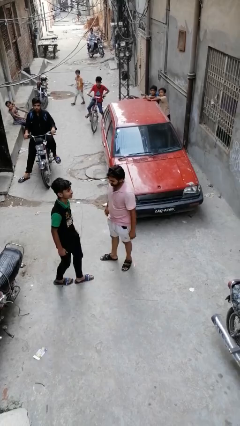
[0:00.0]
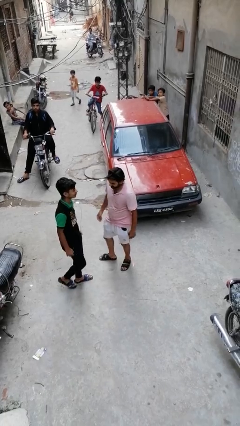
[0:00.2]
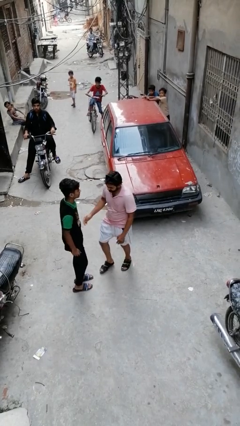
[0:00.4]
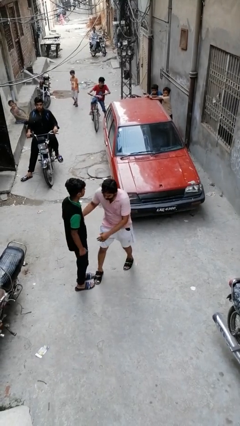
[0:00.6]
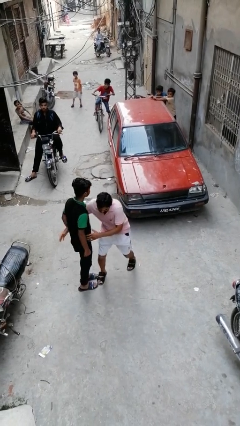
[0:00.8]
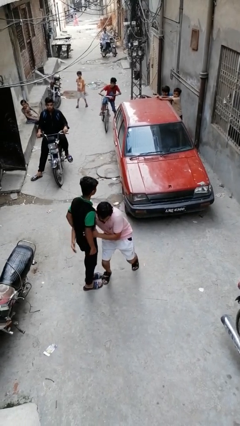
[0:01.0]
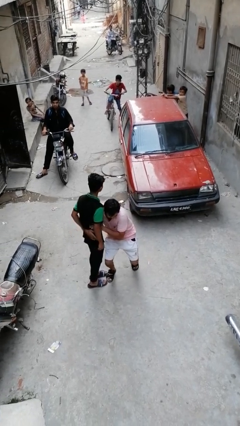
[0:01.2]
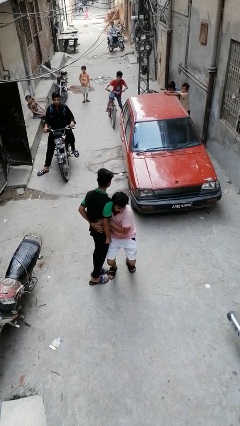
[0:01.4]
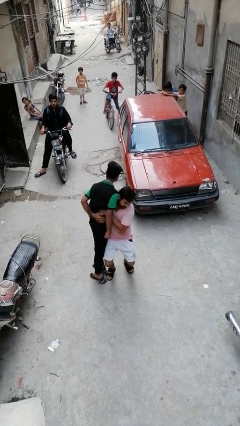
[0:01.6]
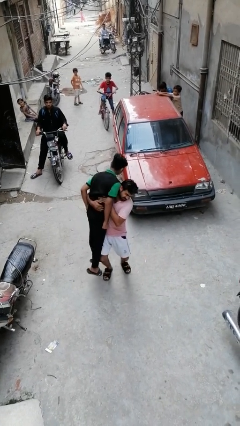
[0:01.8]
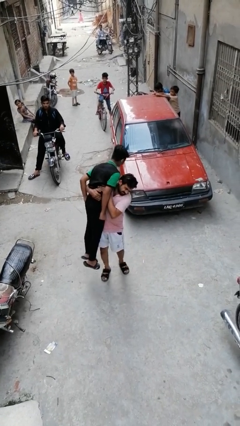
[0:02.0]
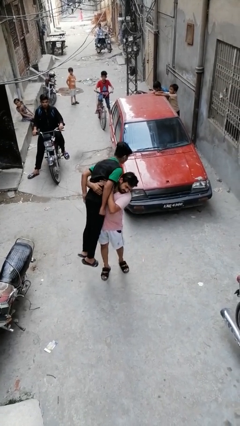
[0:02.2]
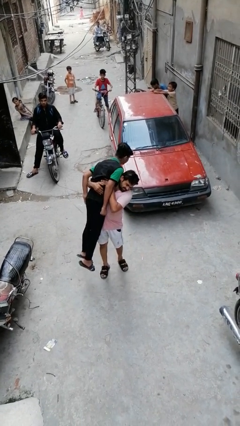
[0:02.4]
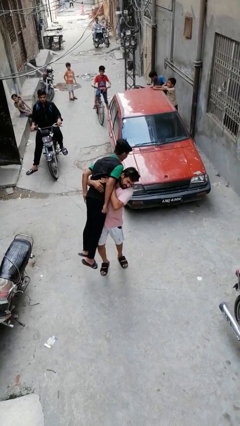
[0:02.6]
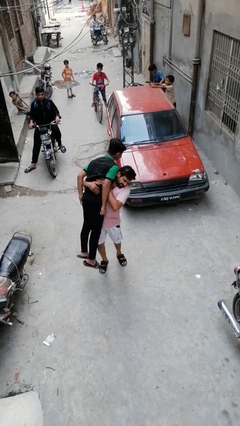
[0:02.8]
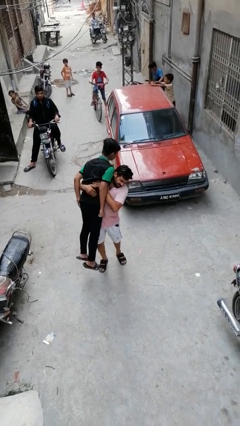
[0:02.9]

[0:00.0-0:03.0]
person picks up person

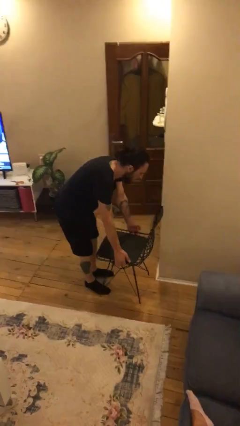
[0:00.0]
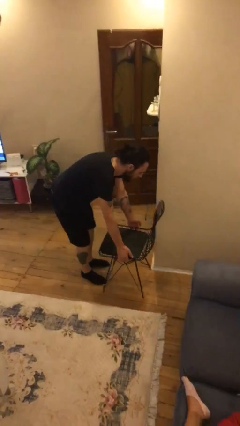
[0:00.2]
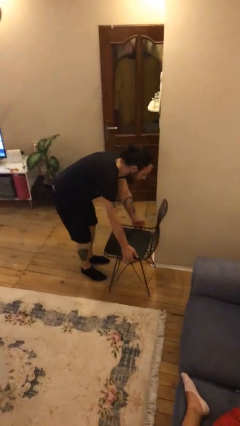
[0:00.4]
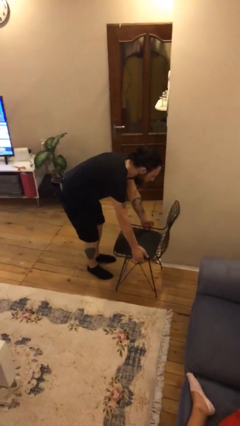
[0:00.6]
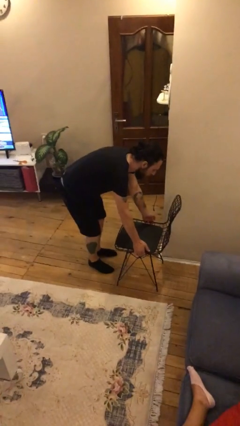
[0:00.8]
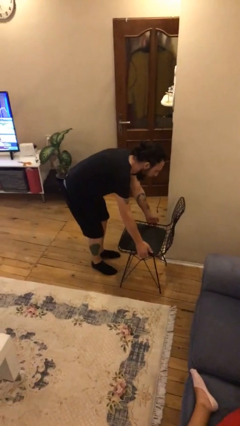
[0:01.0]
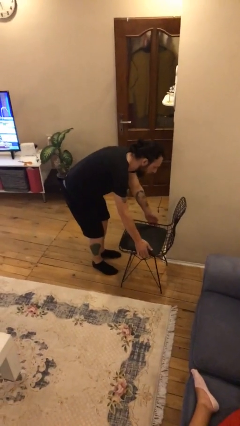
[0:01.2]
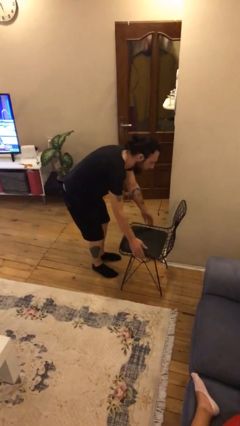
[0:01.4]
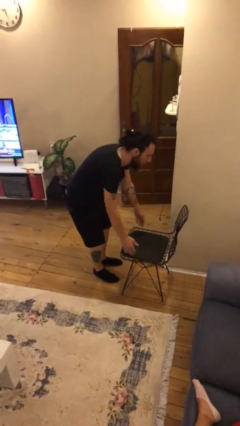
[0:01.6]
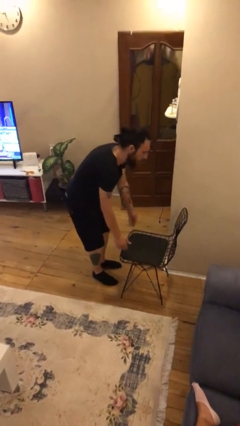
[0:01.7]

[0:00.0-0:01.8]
person puts down object on floor

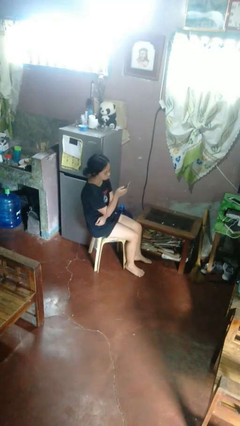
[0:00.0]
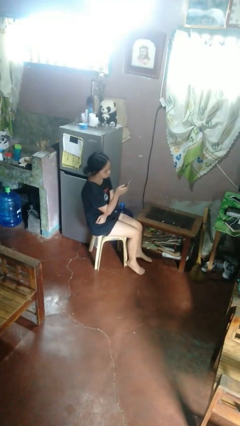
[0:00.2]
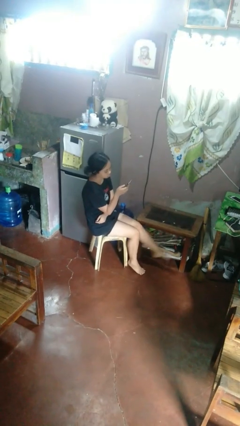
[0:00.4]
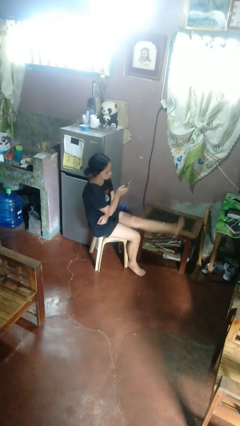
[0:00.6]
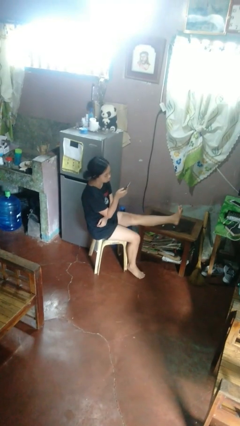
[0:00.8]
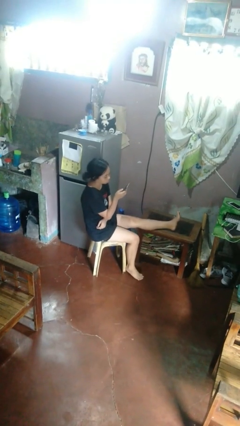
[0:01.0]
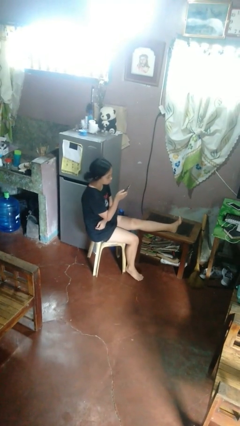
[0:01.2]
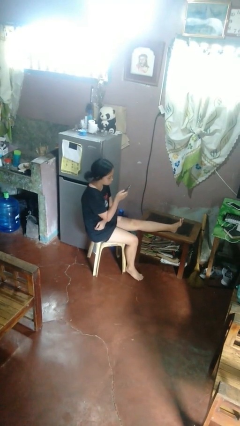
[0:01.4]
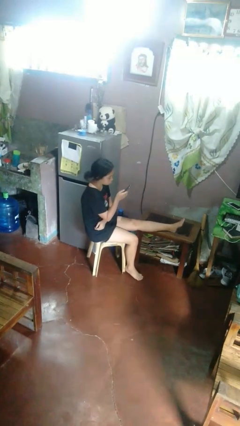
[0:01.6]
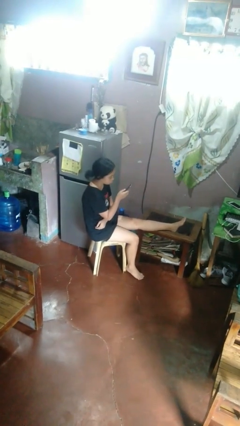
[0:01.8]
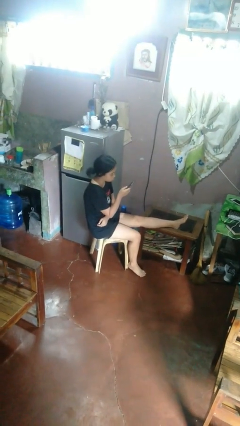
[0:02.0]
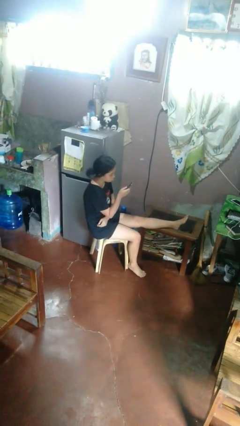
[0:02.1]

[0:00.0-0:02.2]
person puts feet up

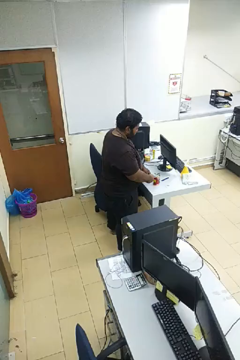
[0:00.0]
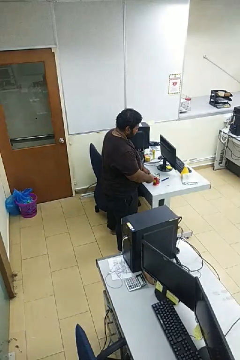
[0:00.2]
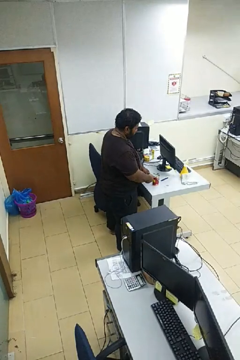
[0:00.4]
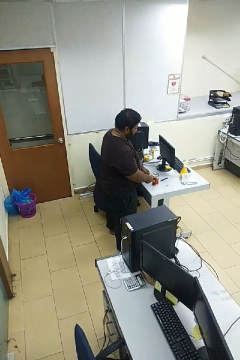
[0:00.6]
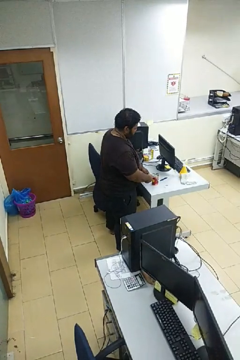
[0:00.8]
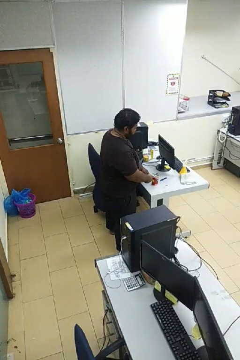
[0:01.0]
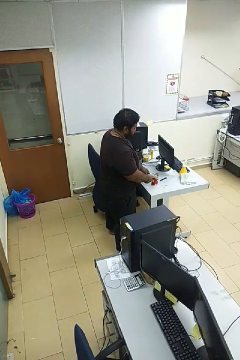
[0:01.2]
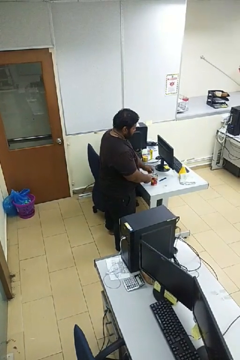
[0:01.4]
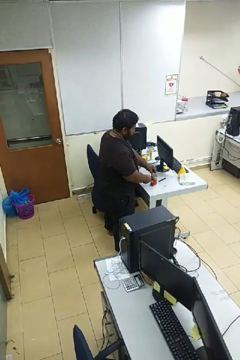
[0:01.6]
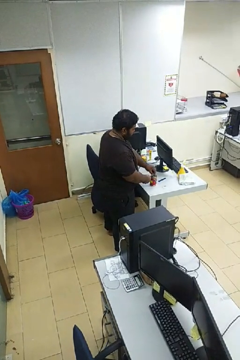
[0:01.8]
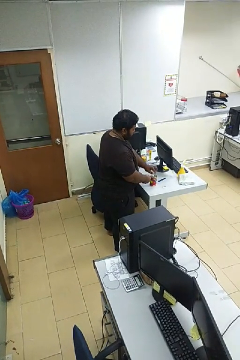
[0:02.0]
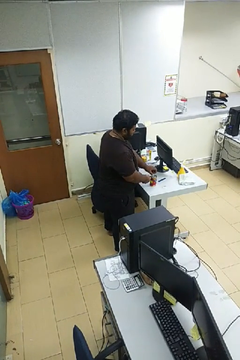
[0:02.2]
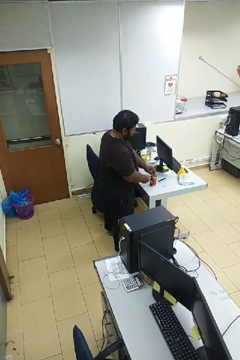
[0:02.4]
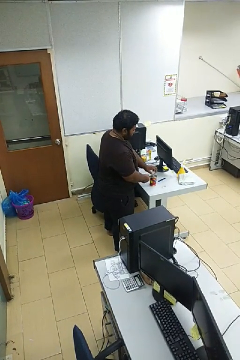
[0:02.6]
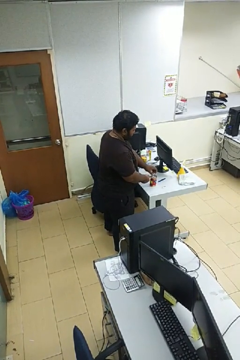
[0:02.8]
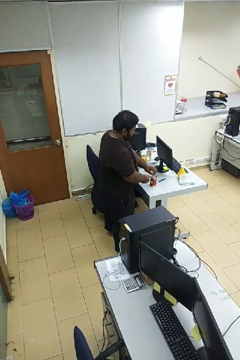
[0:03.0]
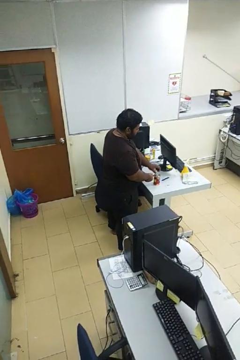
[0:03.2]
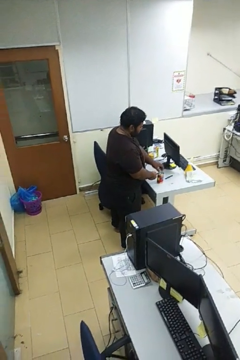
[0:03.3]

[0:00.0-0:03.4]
person opens can with can opener

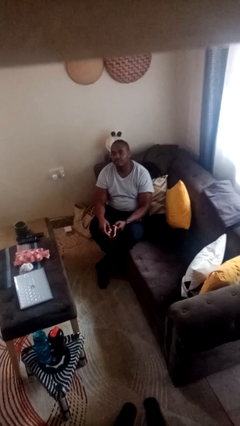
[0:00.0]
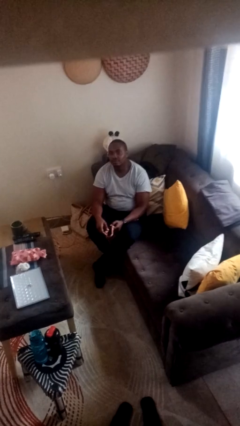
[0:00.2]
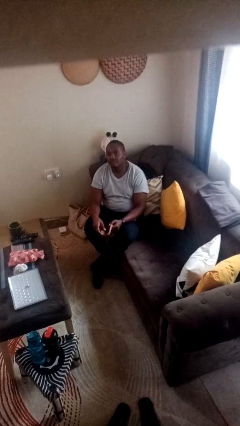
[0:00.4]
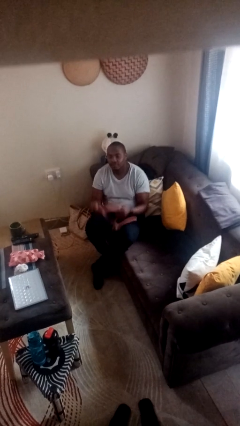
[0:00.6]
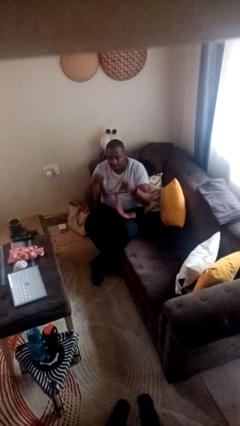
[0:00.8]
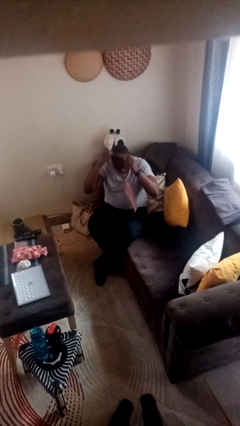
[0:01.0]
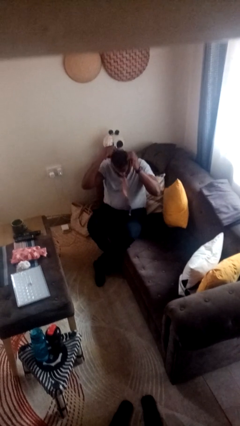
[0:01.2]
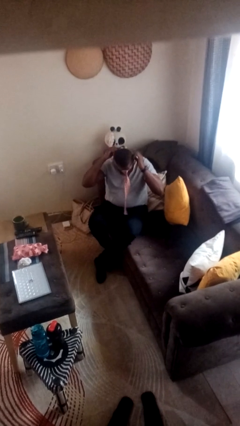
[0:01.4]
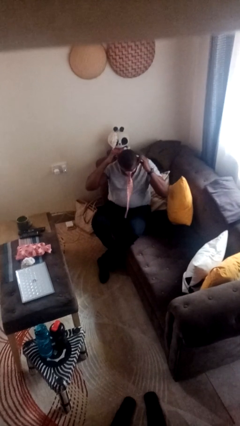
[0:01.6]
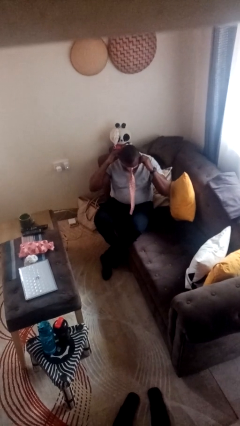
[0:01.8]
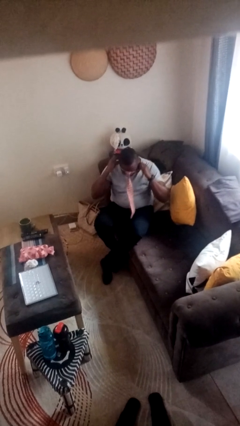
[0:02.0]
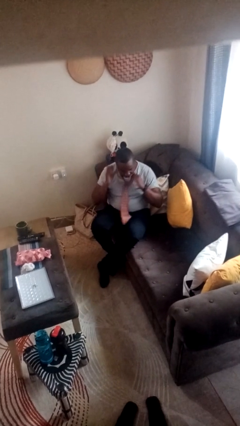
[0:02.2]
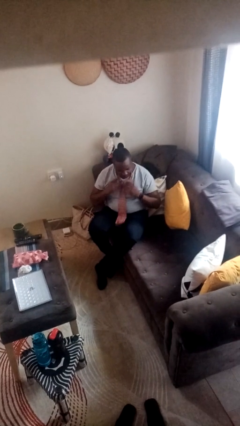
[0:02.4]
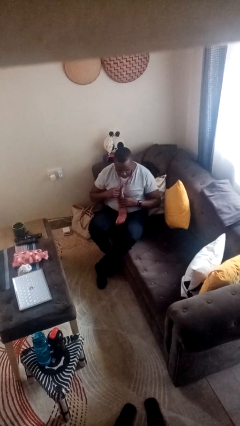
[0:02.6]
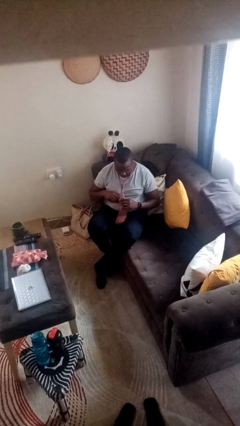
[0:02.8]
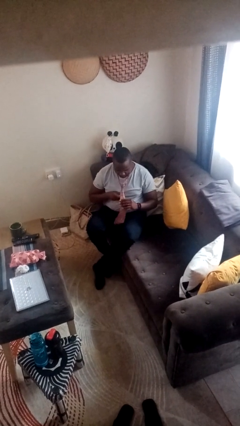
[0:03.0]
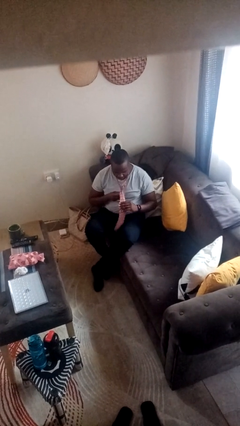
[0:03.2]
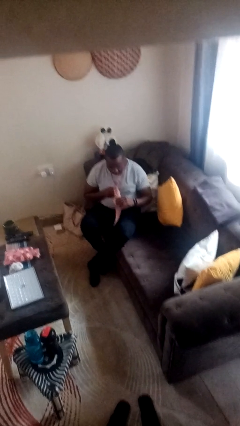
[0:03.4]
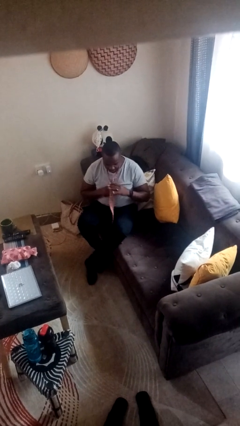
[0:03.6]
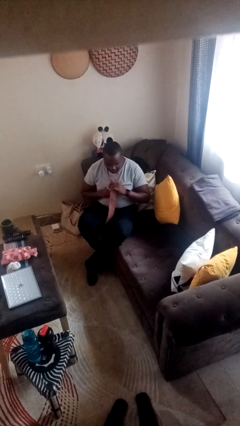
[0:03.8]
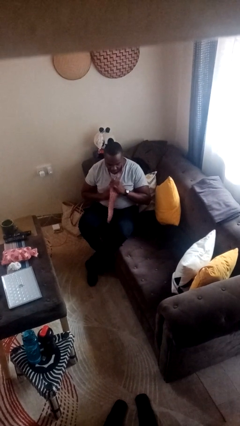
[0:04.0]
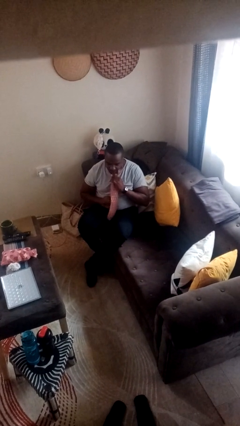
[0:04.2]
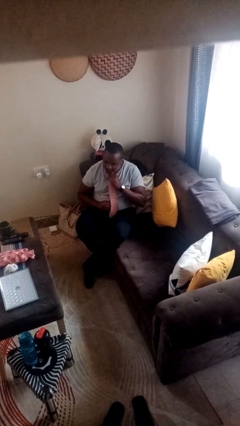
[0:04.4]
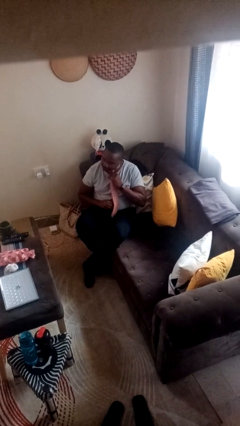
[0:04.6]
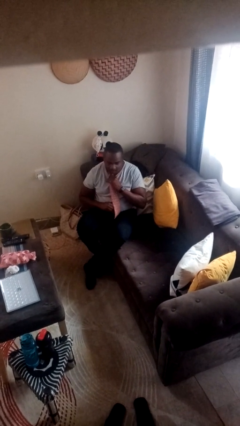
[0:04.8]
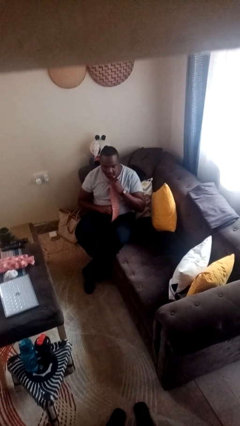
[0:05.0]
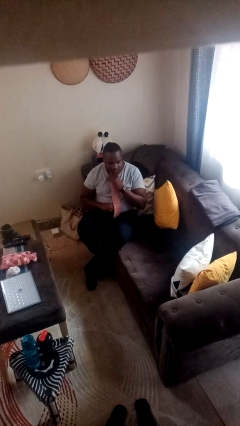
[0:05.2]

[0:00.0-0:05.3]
person puts on necktie

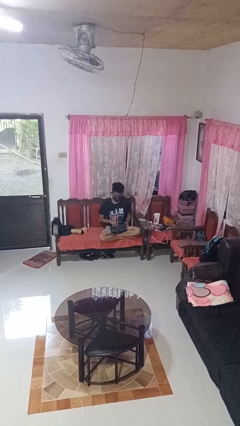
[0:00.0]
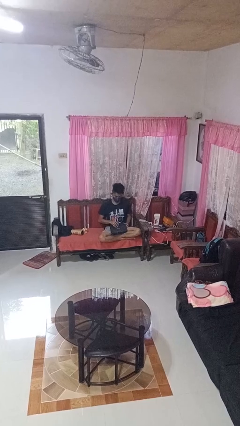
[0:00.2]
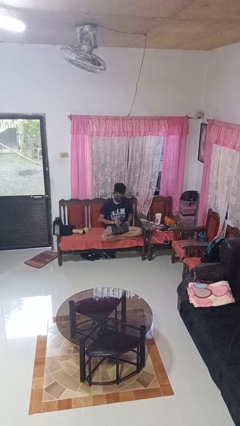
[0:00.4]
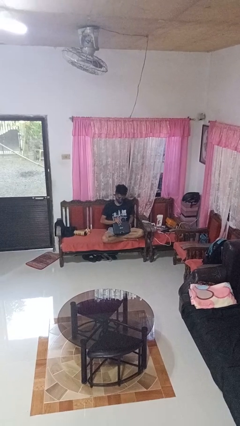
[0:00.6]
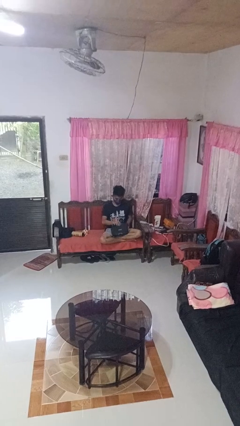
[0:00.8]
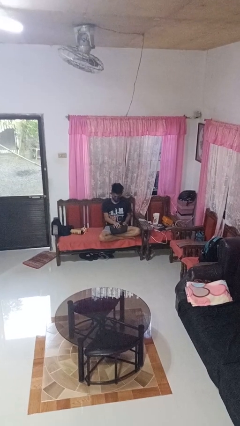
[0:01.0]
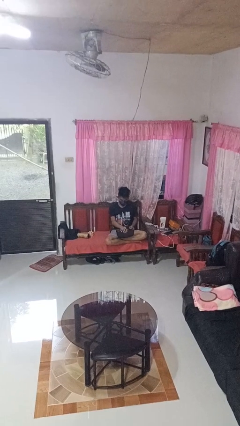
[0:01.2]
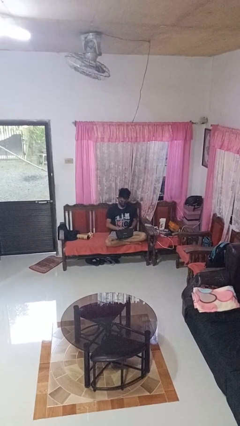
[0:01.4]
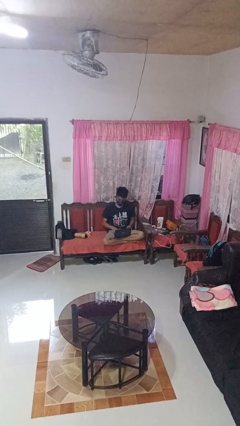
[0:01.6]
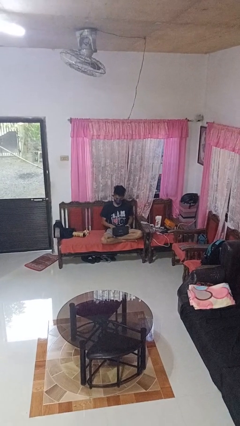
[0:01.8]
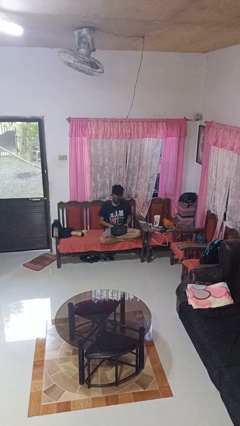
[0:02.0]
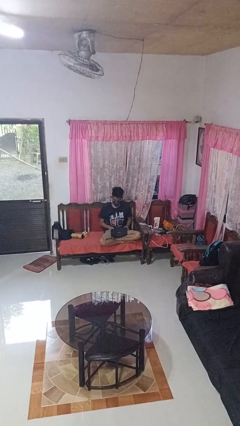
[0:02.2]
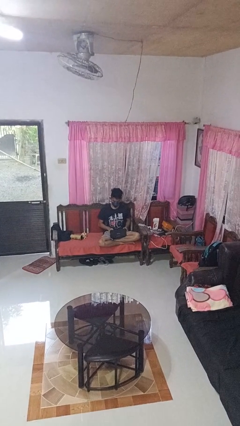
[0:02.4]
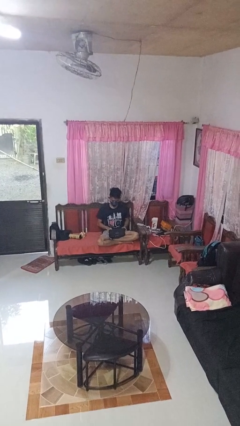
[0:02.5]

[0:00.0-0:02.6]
person opens laptop
